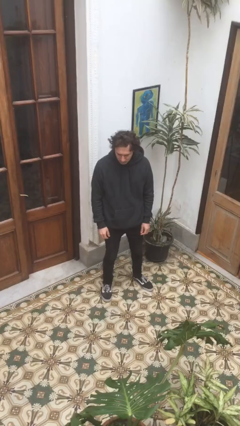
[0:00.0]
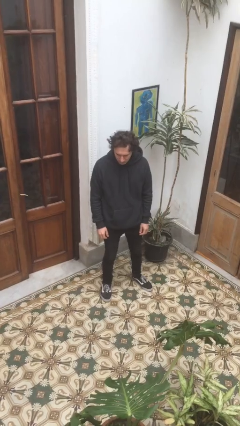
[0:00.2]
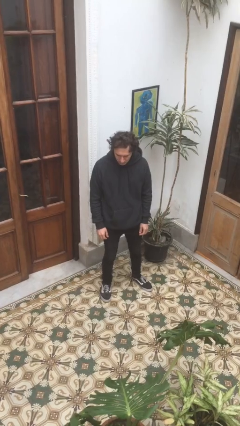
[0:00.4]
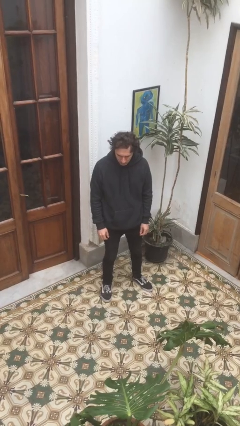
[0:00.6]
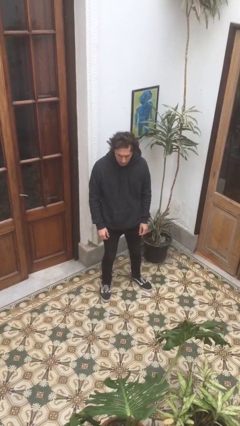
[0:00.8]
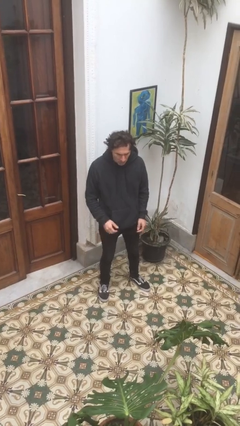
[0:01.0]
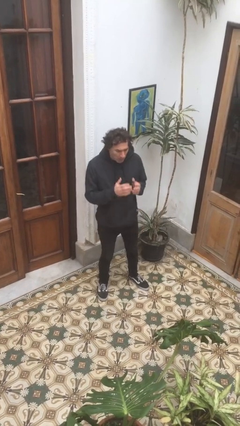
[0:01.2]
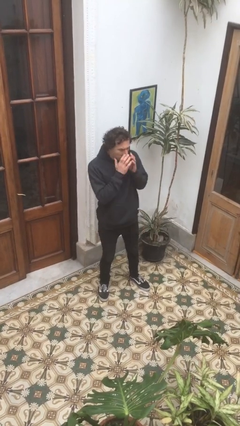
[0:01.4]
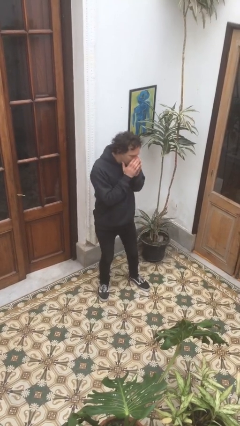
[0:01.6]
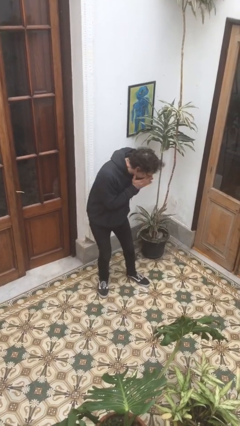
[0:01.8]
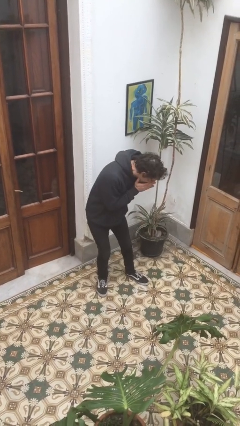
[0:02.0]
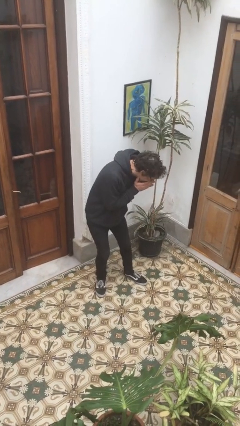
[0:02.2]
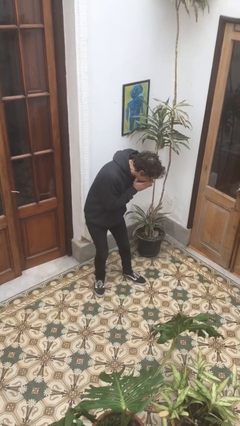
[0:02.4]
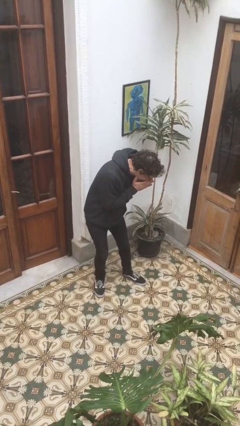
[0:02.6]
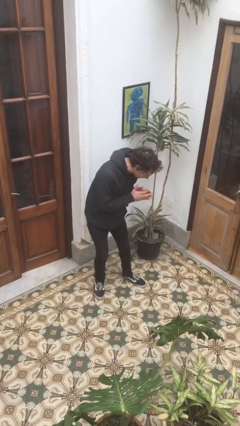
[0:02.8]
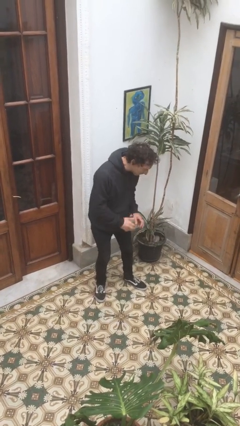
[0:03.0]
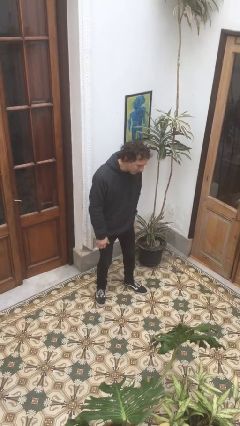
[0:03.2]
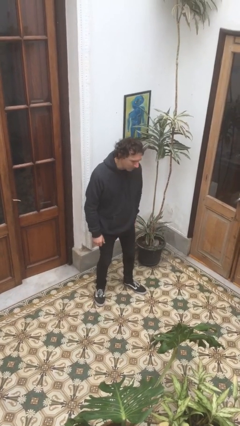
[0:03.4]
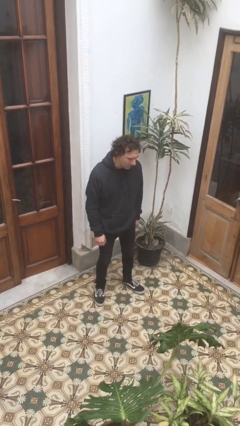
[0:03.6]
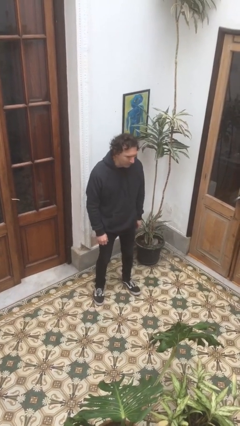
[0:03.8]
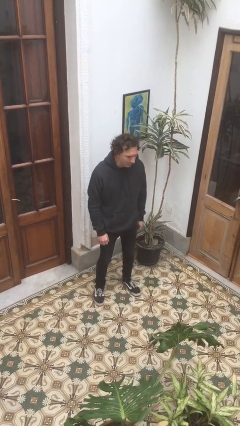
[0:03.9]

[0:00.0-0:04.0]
person sneezes into hand

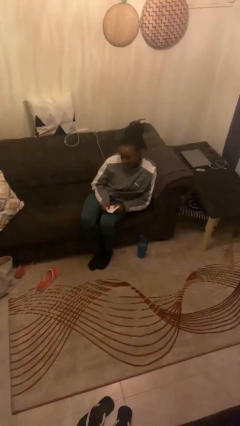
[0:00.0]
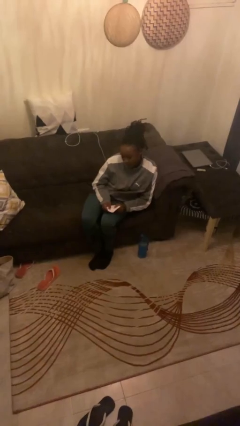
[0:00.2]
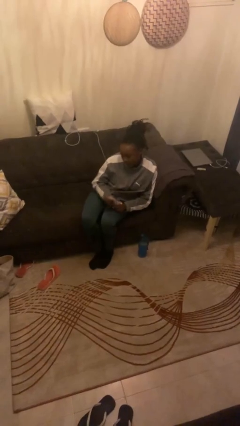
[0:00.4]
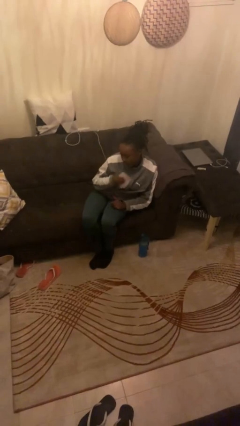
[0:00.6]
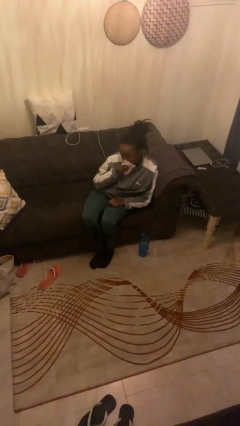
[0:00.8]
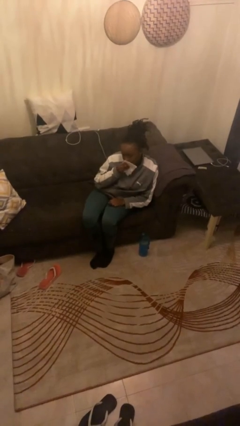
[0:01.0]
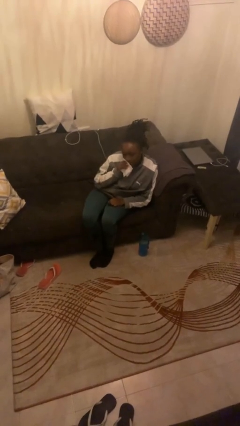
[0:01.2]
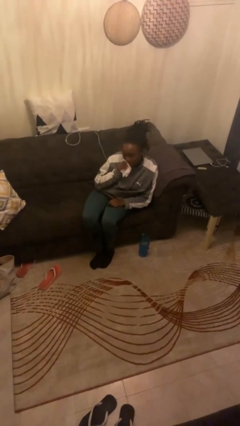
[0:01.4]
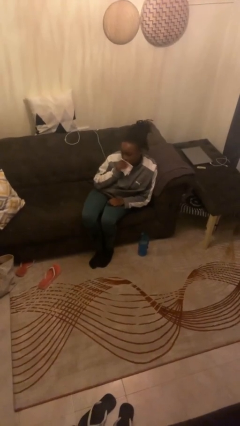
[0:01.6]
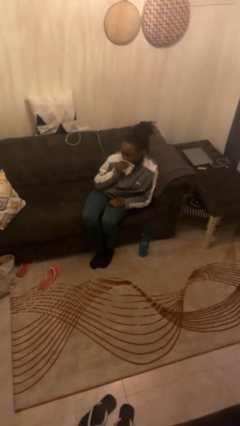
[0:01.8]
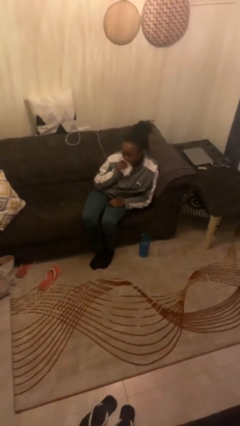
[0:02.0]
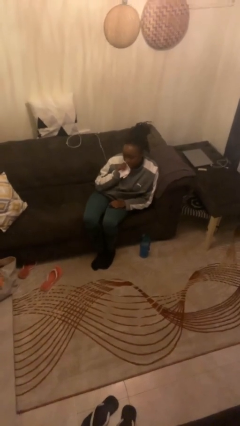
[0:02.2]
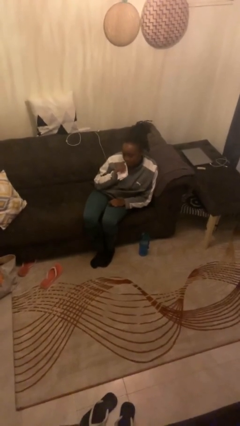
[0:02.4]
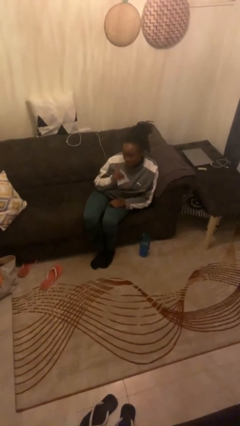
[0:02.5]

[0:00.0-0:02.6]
person wipes mouth with napkin

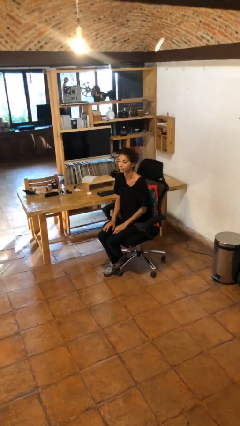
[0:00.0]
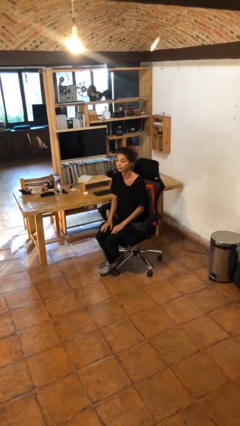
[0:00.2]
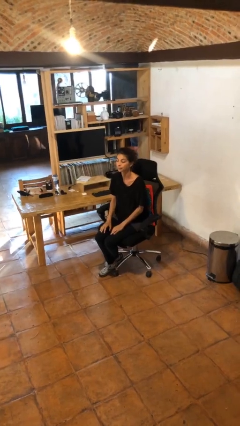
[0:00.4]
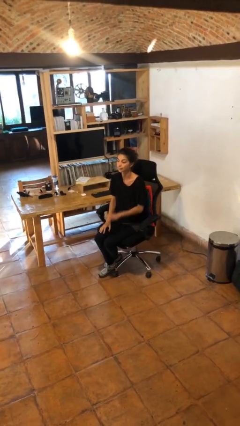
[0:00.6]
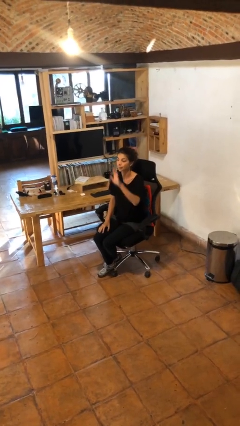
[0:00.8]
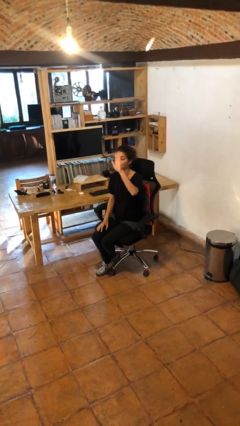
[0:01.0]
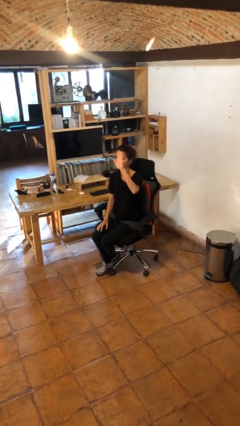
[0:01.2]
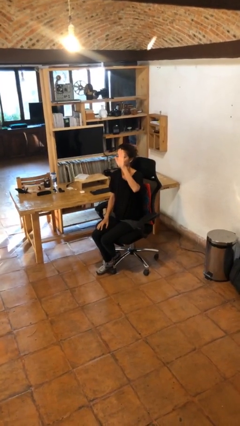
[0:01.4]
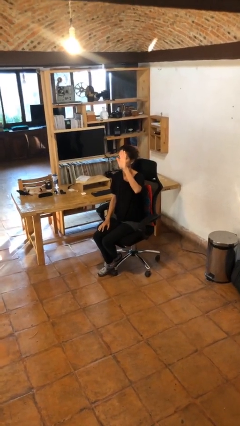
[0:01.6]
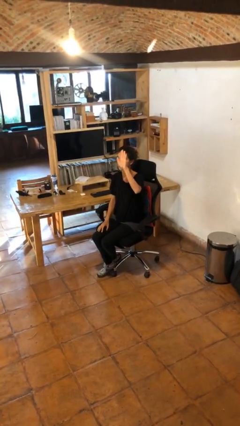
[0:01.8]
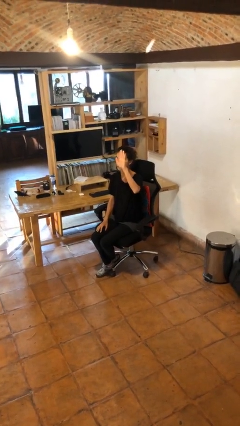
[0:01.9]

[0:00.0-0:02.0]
person gestures raise hand

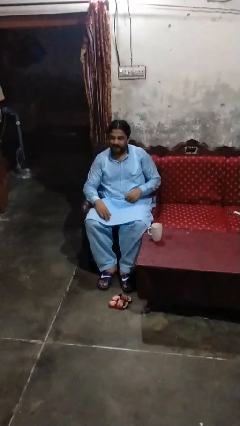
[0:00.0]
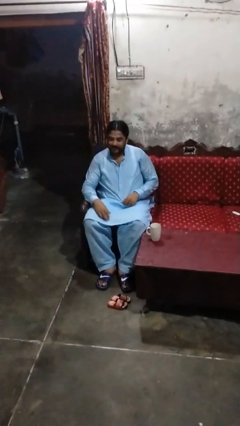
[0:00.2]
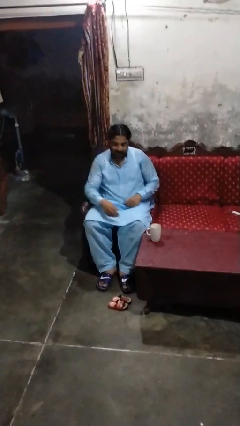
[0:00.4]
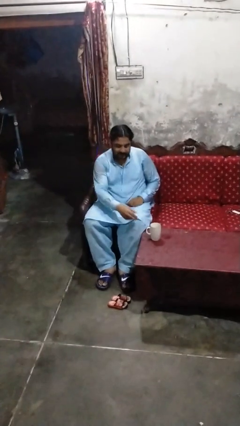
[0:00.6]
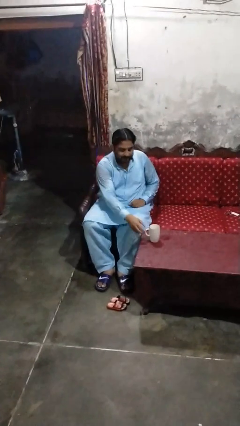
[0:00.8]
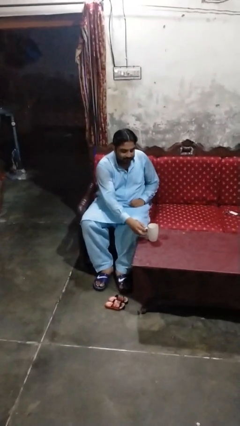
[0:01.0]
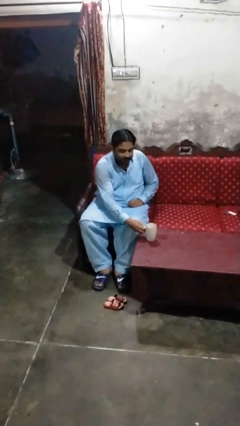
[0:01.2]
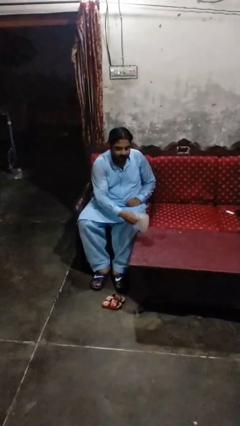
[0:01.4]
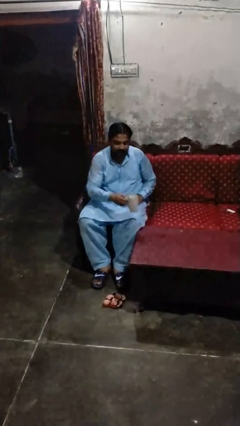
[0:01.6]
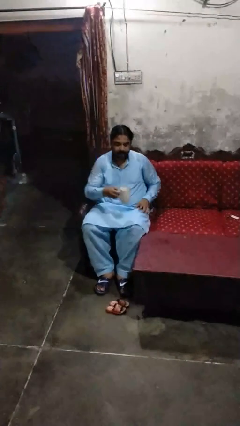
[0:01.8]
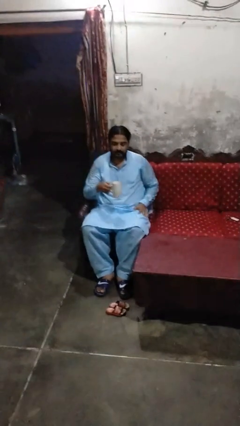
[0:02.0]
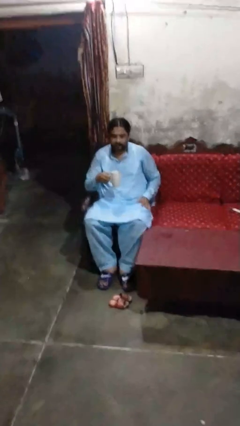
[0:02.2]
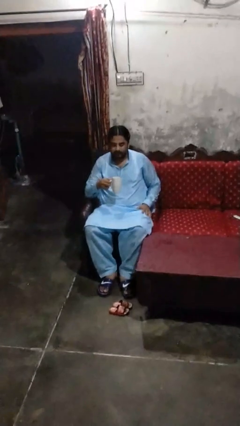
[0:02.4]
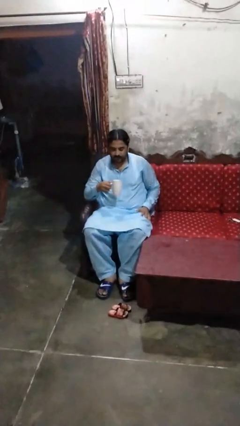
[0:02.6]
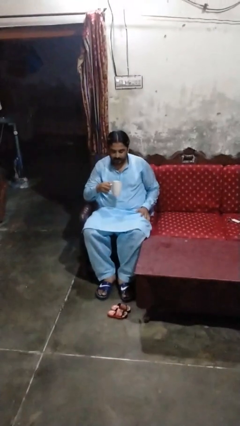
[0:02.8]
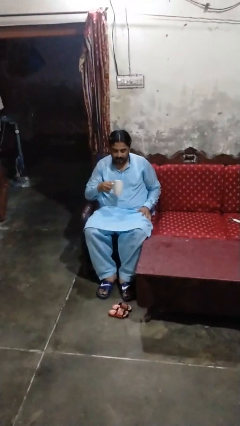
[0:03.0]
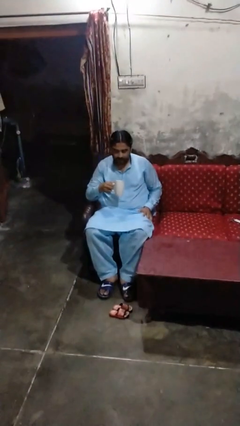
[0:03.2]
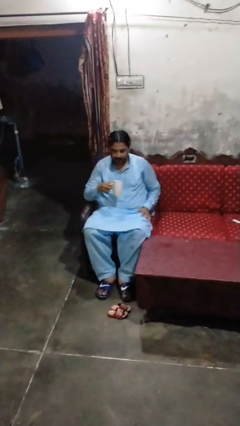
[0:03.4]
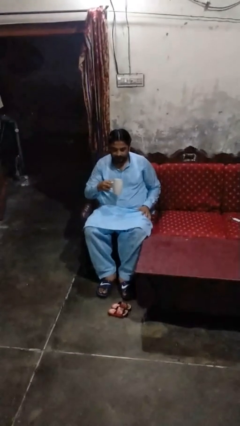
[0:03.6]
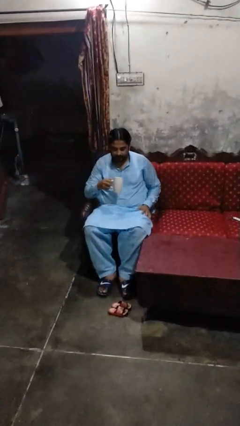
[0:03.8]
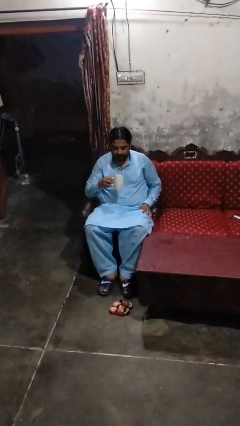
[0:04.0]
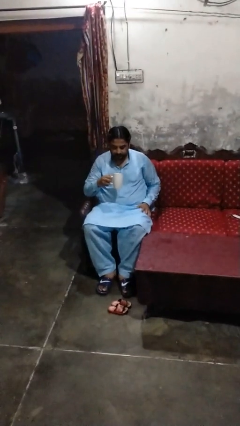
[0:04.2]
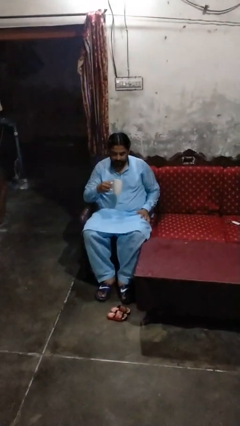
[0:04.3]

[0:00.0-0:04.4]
person picks up object from table

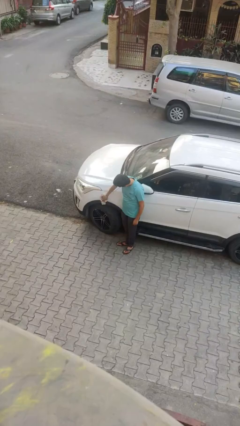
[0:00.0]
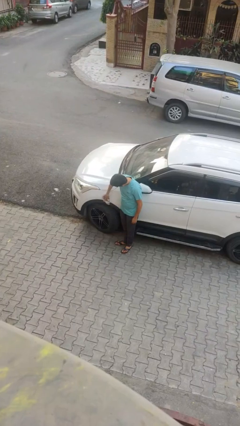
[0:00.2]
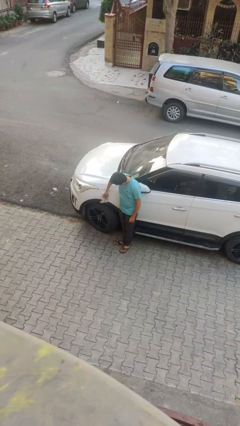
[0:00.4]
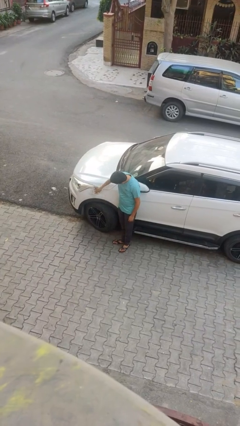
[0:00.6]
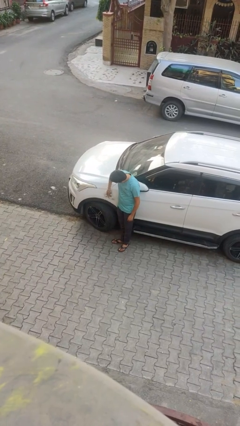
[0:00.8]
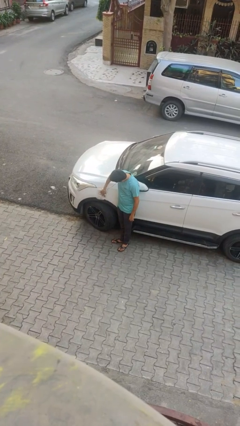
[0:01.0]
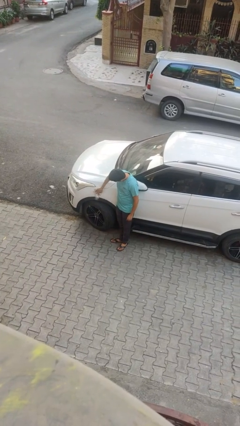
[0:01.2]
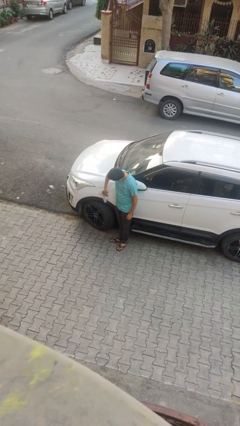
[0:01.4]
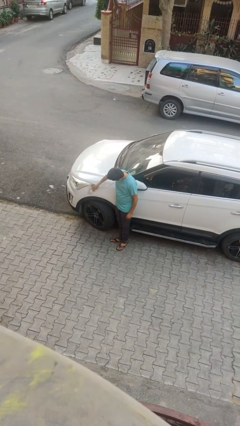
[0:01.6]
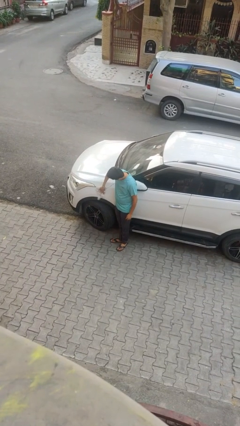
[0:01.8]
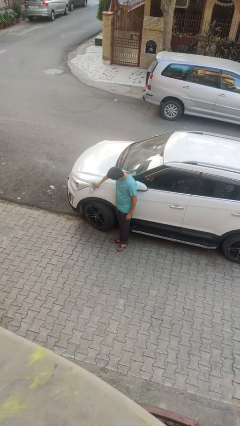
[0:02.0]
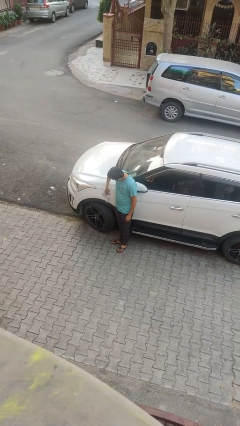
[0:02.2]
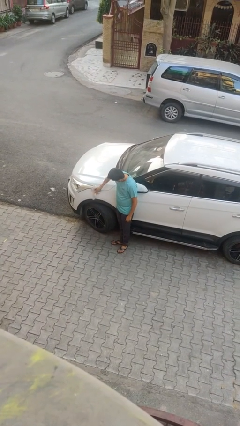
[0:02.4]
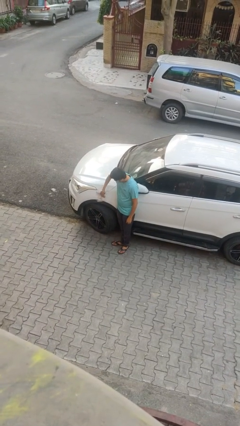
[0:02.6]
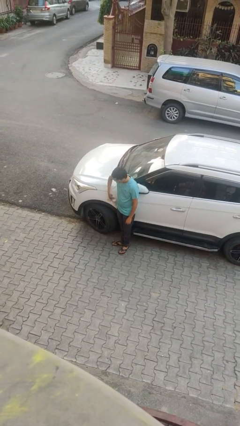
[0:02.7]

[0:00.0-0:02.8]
person polishes car with rag

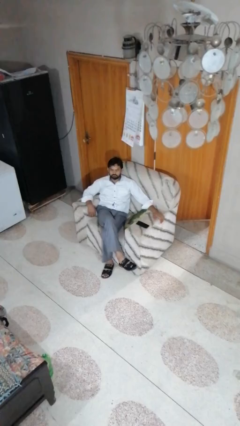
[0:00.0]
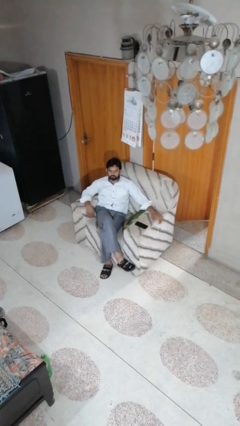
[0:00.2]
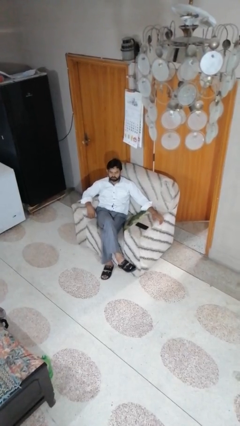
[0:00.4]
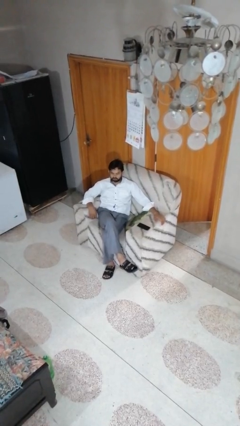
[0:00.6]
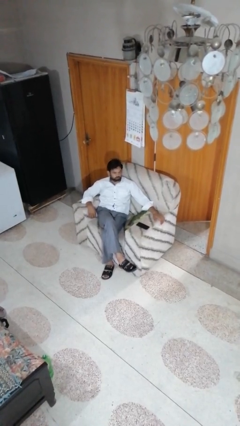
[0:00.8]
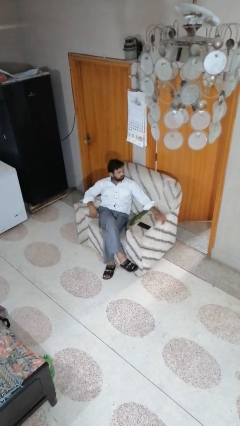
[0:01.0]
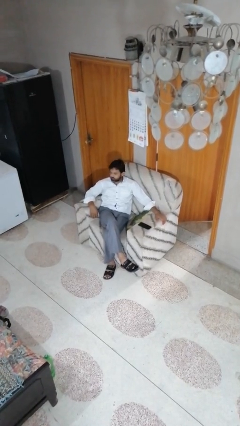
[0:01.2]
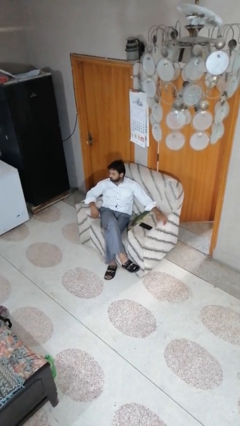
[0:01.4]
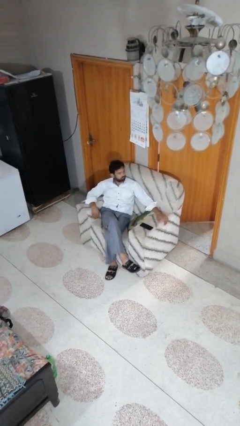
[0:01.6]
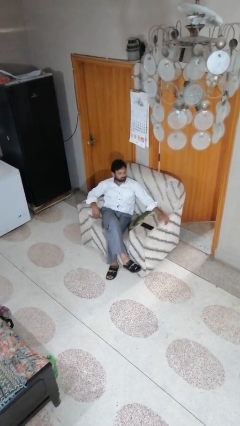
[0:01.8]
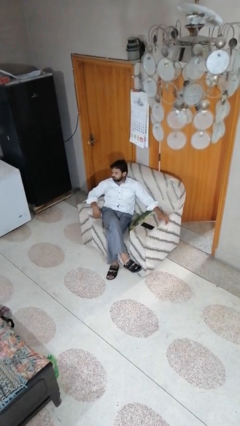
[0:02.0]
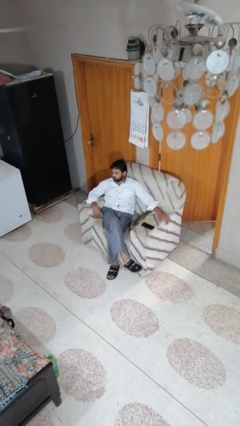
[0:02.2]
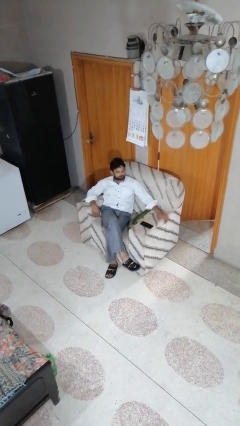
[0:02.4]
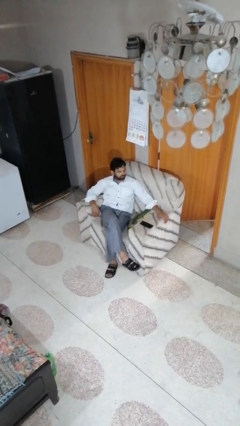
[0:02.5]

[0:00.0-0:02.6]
person shakes head
